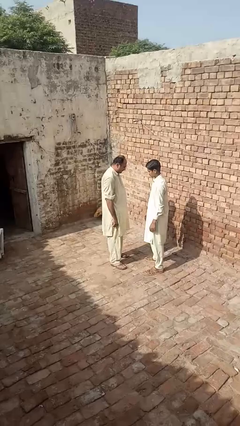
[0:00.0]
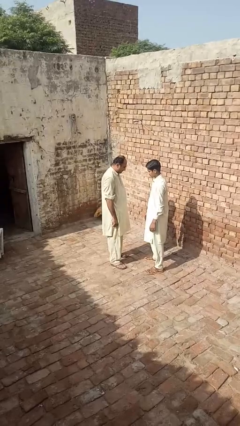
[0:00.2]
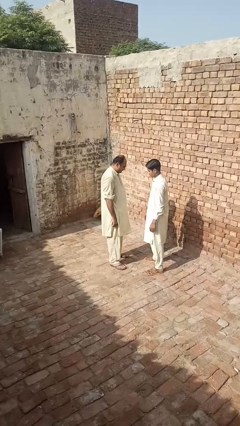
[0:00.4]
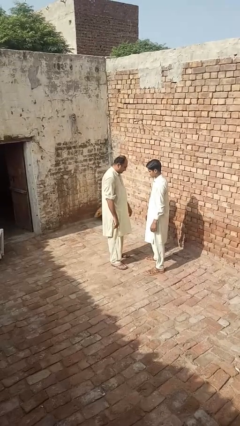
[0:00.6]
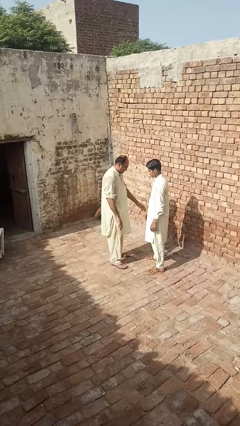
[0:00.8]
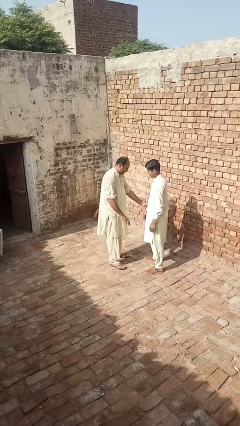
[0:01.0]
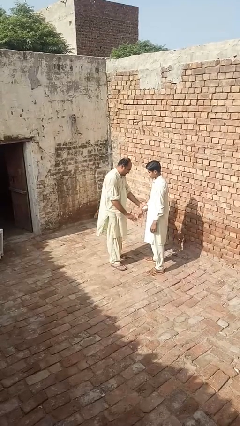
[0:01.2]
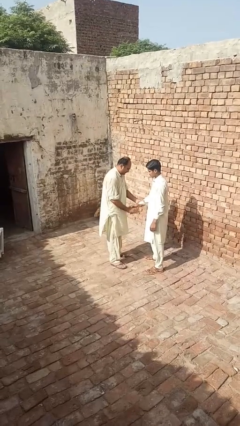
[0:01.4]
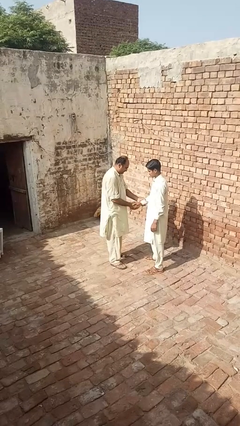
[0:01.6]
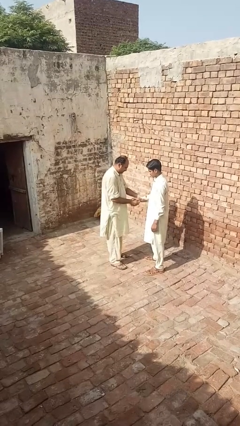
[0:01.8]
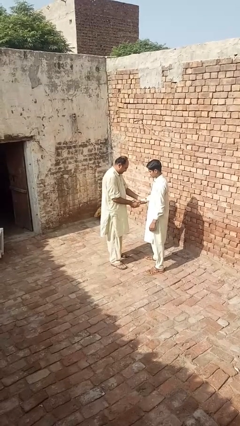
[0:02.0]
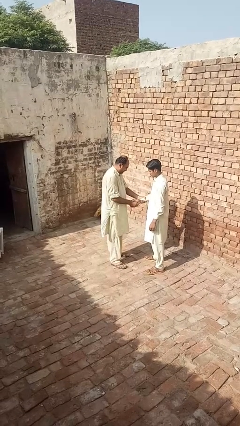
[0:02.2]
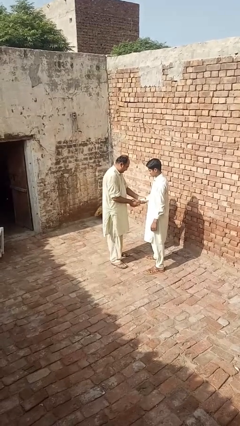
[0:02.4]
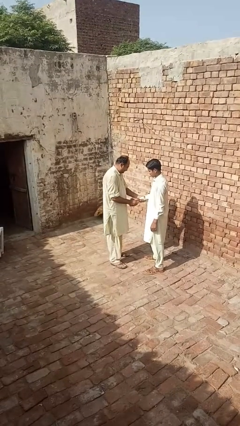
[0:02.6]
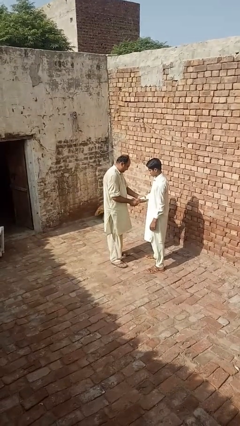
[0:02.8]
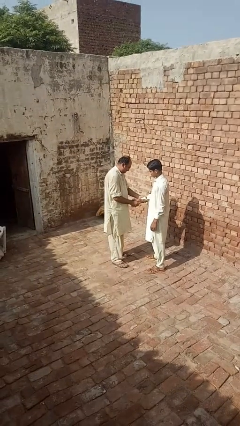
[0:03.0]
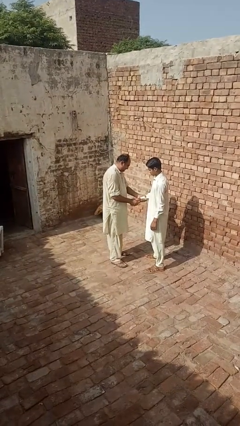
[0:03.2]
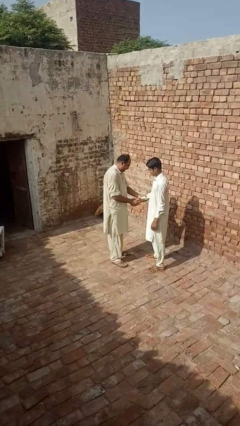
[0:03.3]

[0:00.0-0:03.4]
person grabs person by forearm

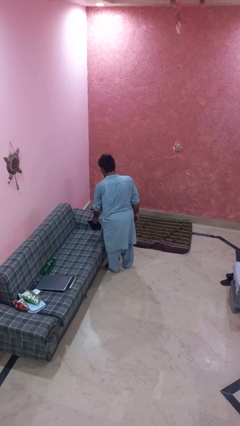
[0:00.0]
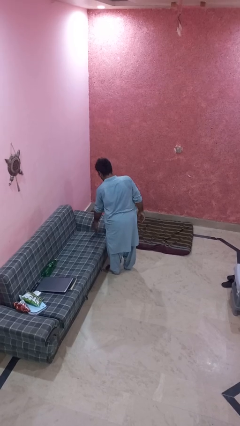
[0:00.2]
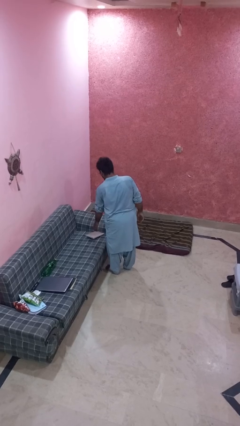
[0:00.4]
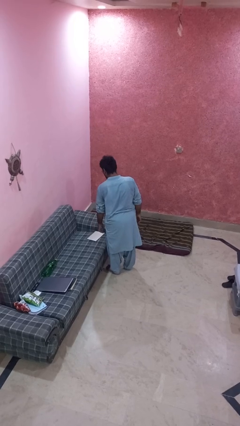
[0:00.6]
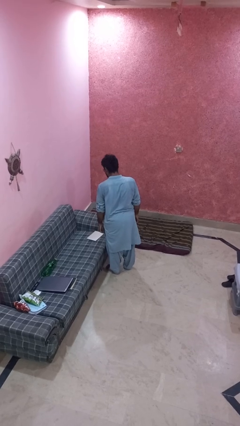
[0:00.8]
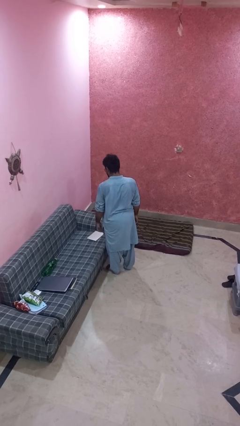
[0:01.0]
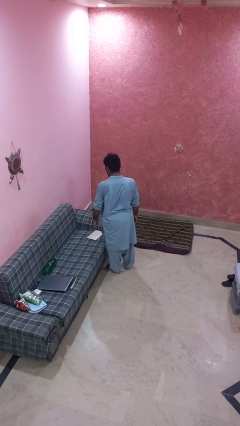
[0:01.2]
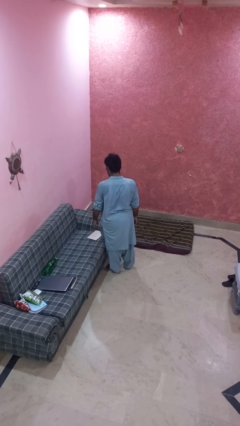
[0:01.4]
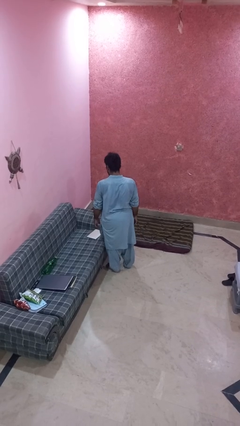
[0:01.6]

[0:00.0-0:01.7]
person puts down object on couch

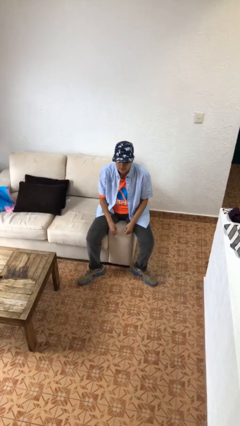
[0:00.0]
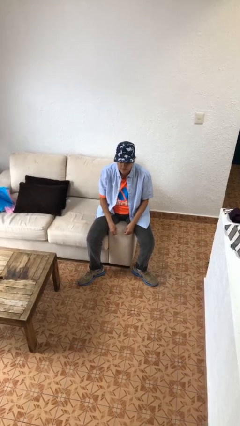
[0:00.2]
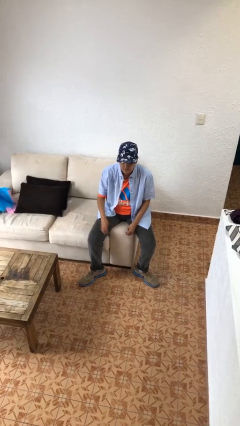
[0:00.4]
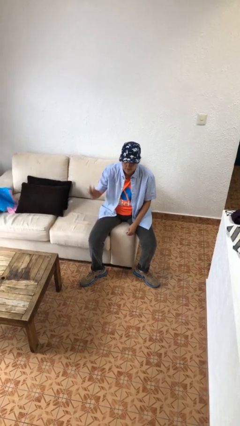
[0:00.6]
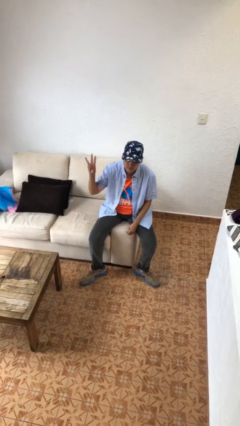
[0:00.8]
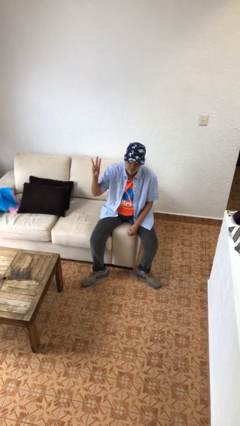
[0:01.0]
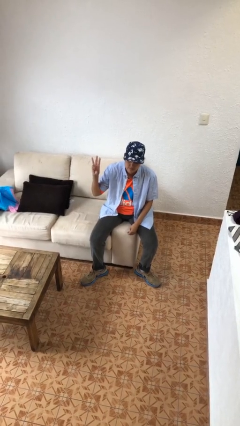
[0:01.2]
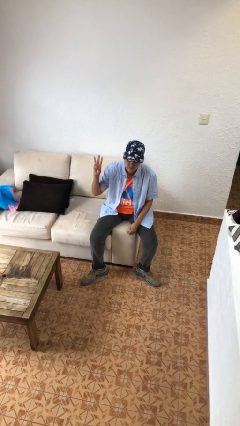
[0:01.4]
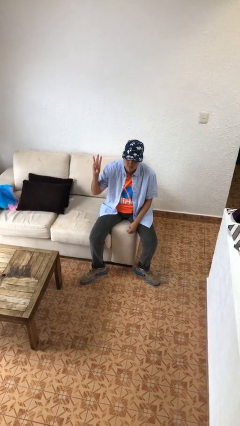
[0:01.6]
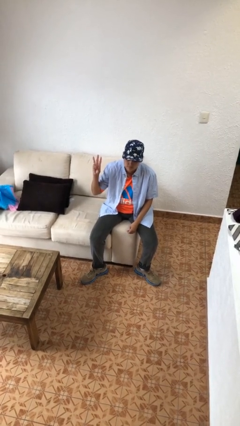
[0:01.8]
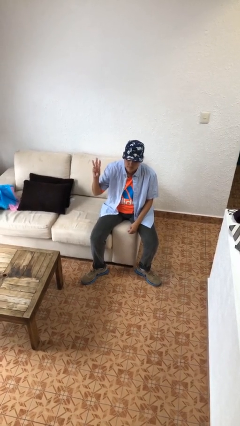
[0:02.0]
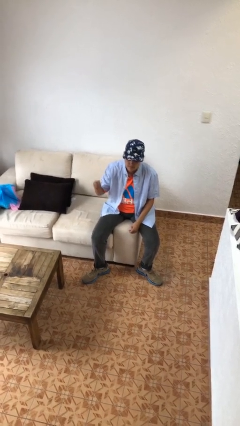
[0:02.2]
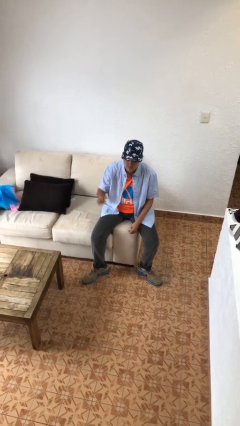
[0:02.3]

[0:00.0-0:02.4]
person gestures number three

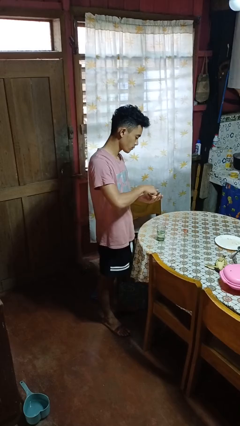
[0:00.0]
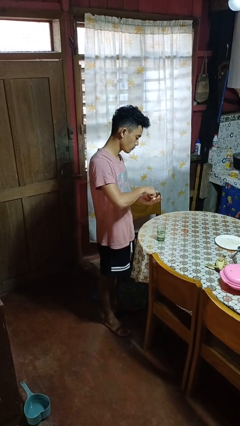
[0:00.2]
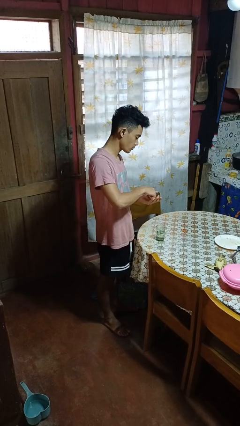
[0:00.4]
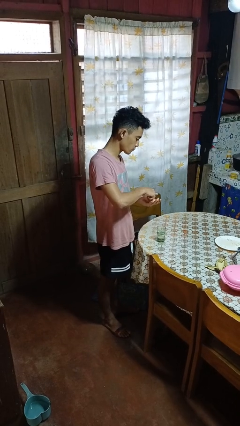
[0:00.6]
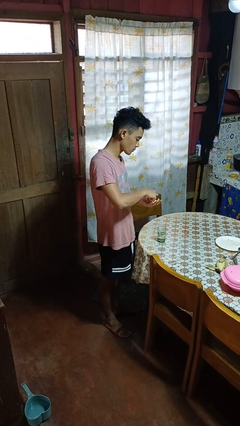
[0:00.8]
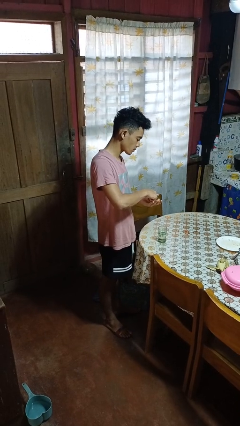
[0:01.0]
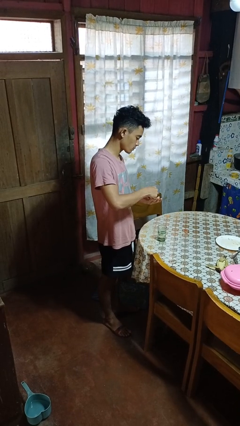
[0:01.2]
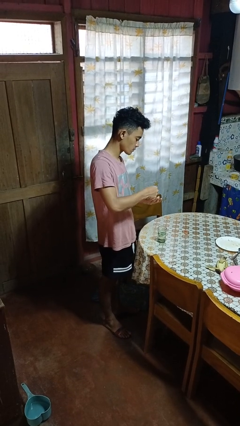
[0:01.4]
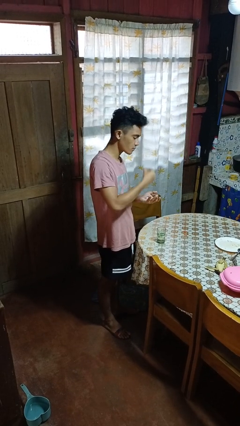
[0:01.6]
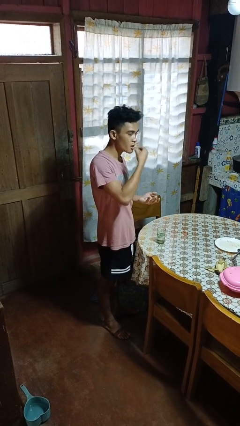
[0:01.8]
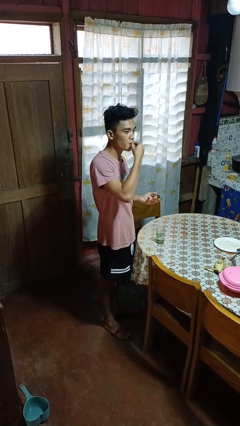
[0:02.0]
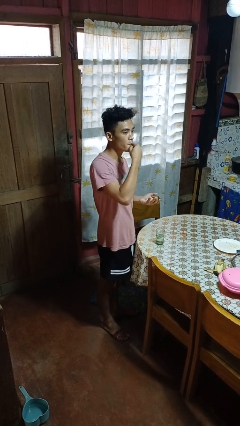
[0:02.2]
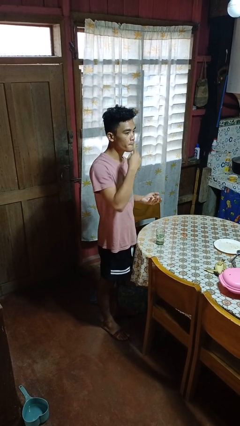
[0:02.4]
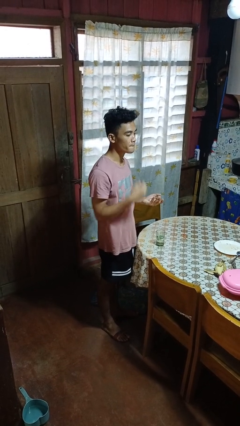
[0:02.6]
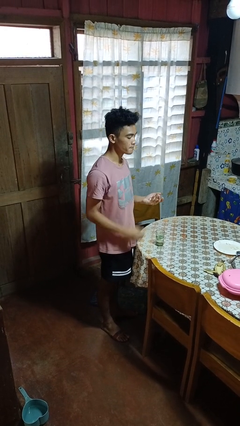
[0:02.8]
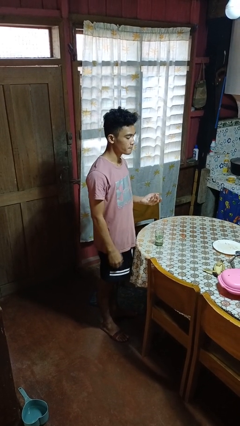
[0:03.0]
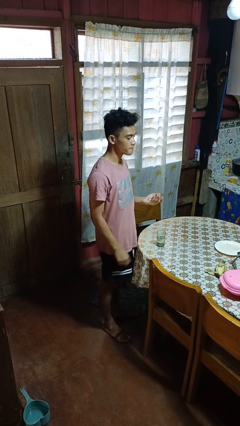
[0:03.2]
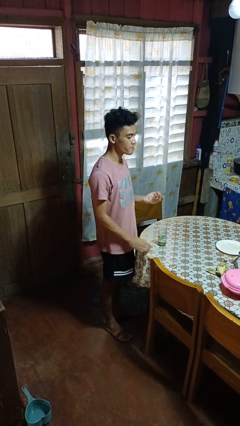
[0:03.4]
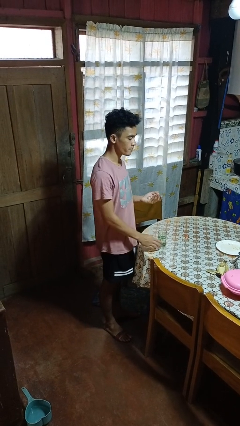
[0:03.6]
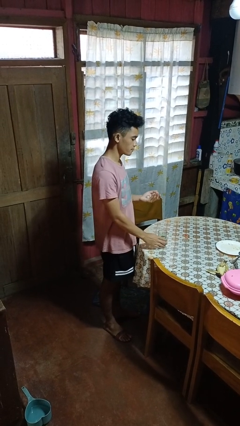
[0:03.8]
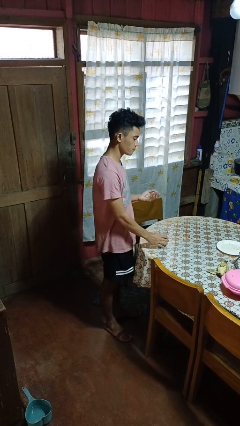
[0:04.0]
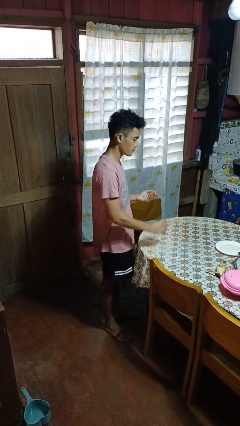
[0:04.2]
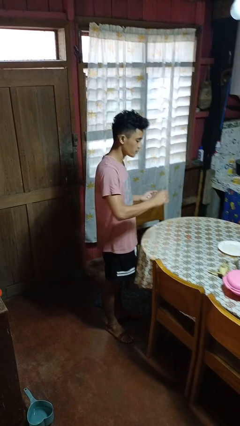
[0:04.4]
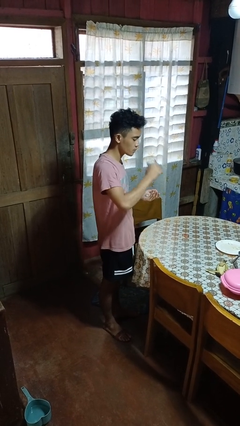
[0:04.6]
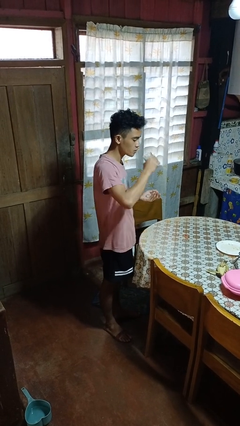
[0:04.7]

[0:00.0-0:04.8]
person takes medicine pills

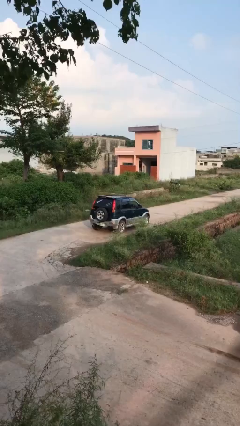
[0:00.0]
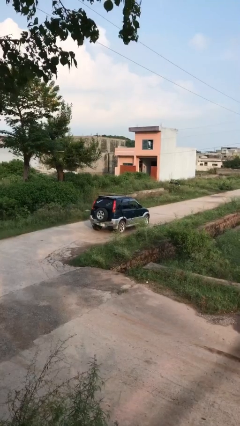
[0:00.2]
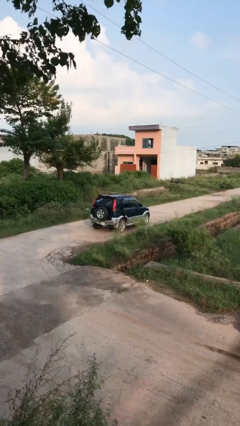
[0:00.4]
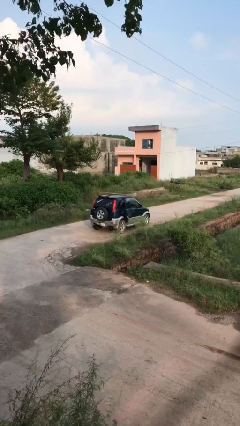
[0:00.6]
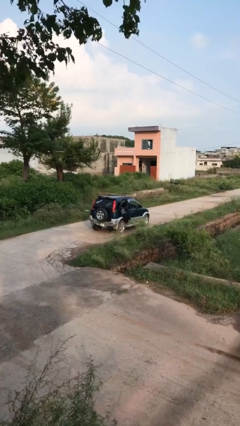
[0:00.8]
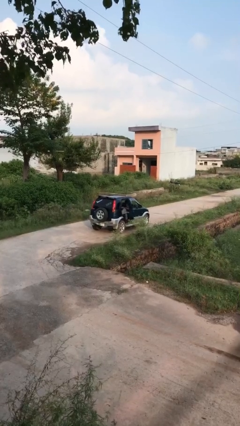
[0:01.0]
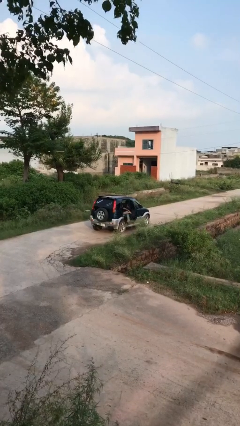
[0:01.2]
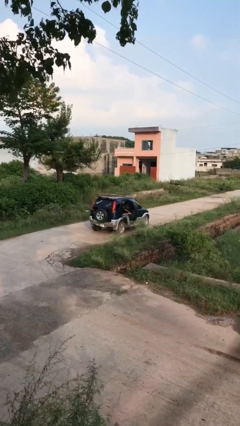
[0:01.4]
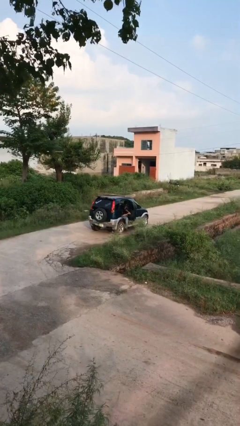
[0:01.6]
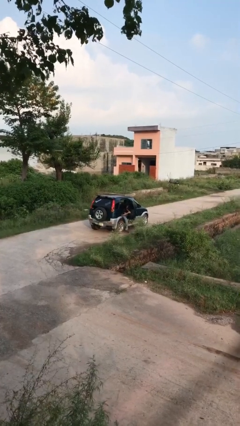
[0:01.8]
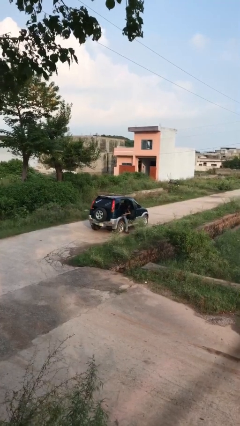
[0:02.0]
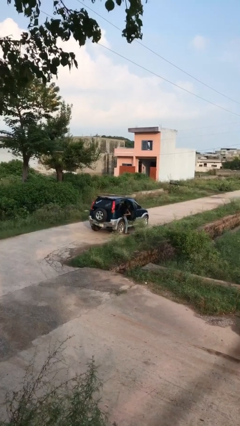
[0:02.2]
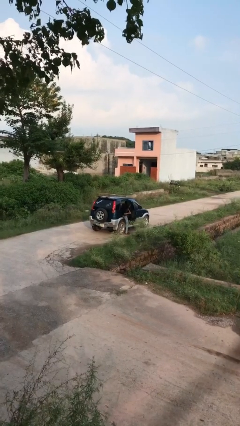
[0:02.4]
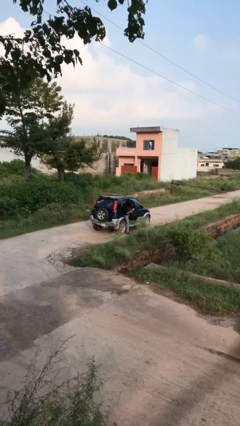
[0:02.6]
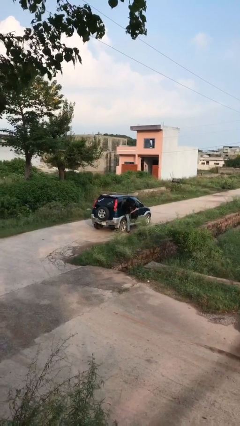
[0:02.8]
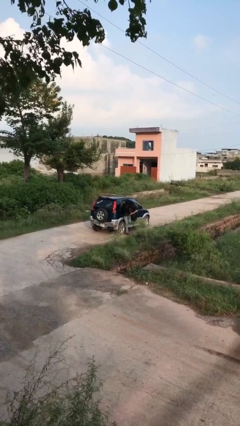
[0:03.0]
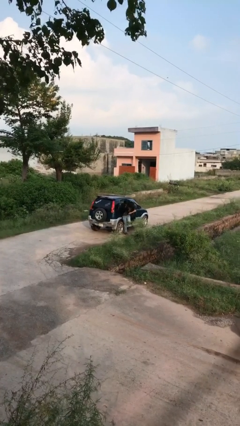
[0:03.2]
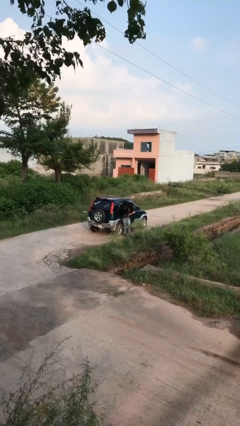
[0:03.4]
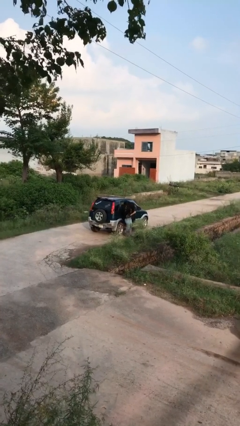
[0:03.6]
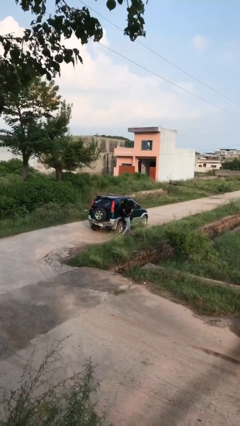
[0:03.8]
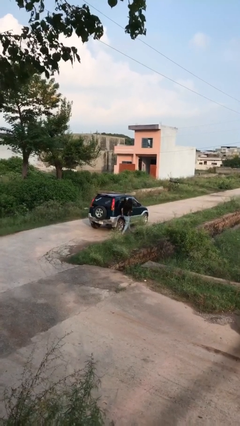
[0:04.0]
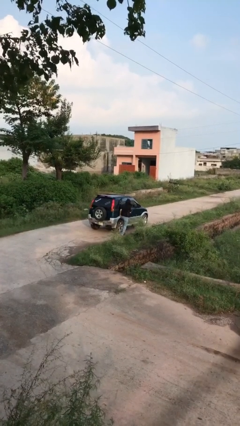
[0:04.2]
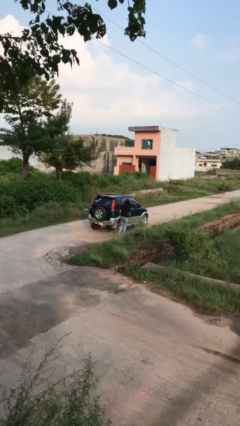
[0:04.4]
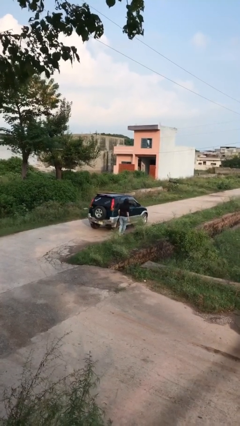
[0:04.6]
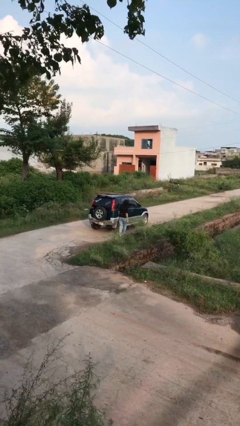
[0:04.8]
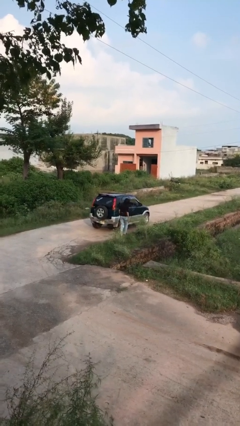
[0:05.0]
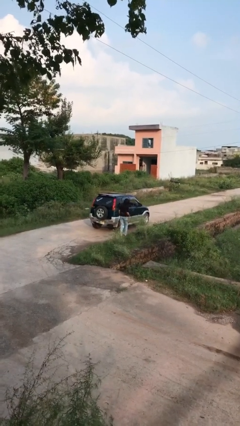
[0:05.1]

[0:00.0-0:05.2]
car drops off person
